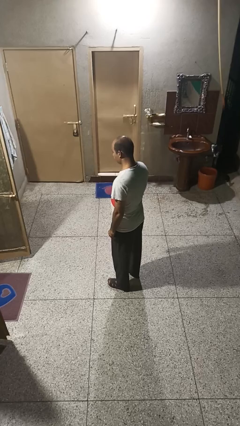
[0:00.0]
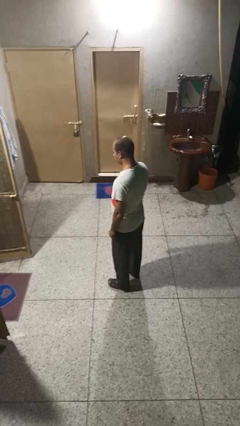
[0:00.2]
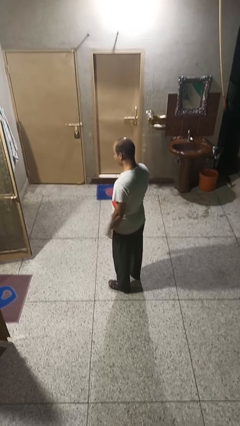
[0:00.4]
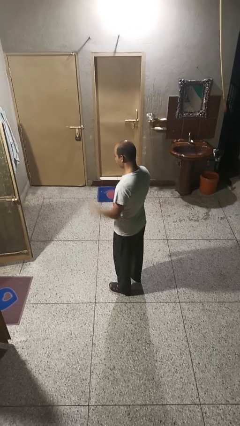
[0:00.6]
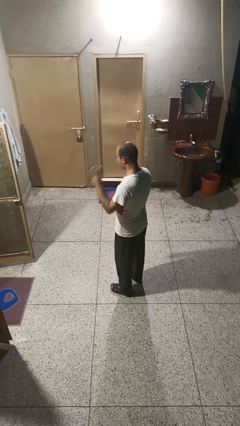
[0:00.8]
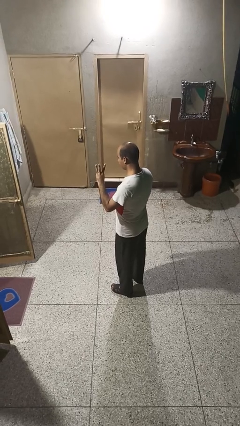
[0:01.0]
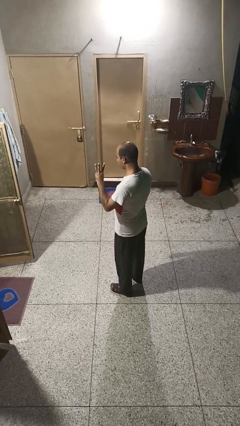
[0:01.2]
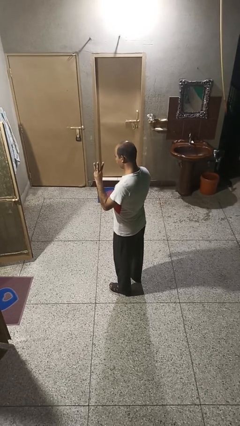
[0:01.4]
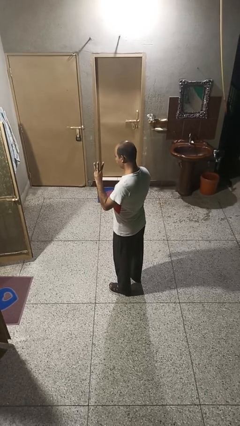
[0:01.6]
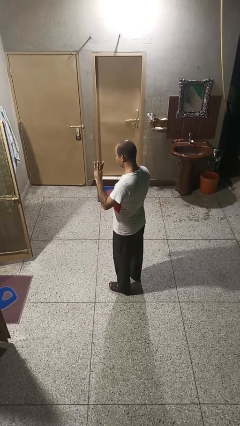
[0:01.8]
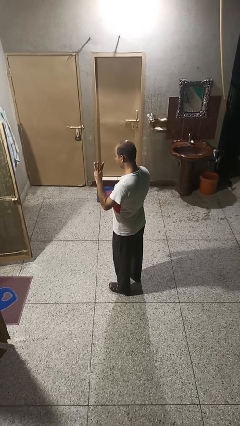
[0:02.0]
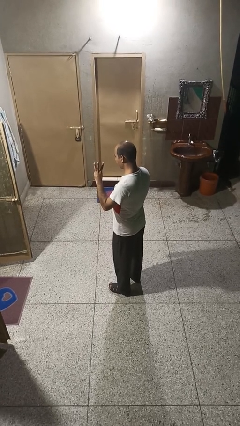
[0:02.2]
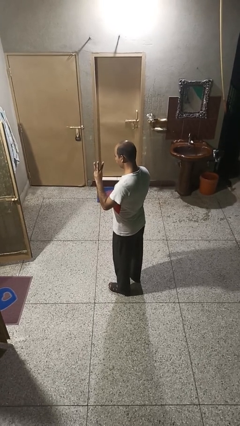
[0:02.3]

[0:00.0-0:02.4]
person gestures number three

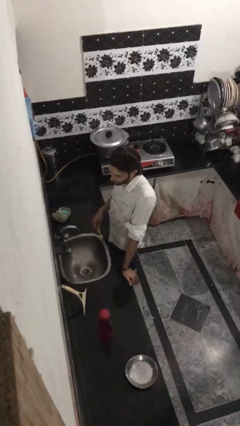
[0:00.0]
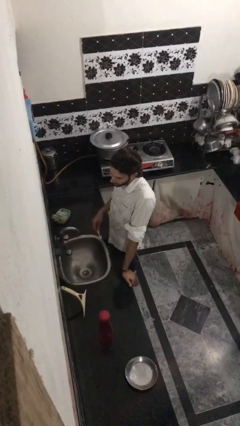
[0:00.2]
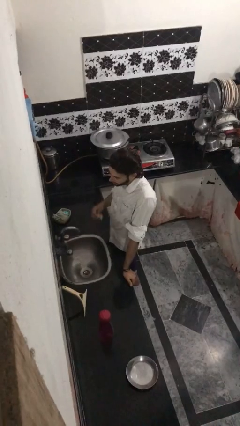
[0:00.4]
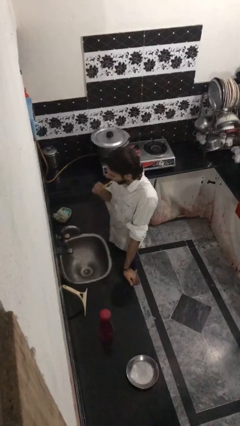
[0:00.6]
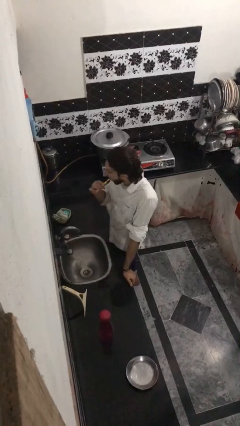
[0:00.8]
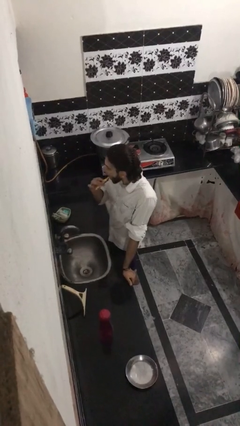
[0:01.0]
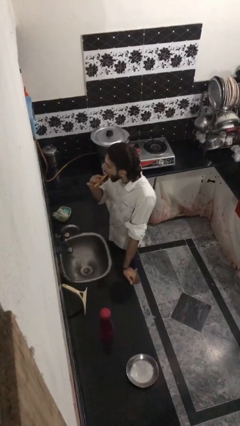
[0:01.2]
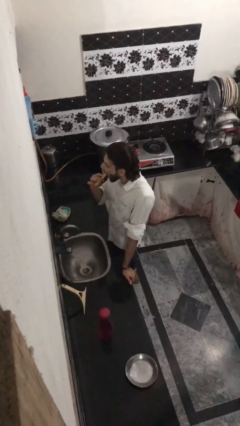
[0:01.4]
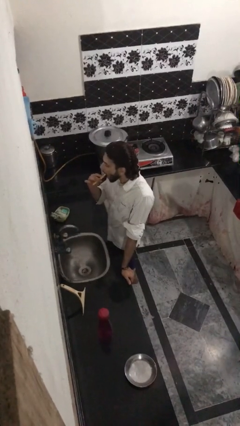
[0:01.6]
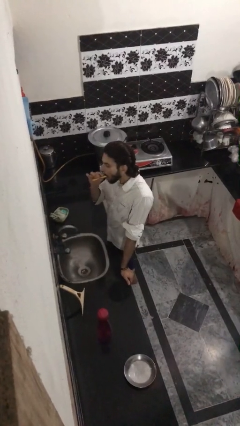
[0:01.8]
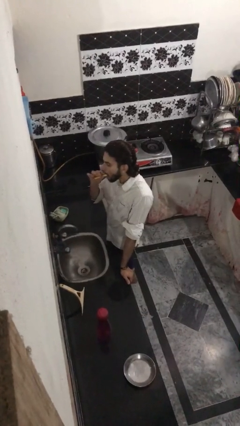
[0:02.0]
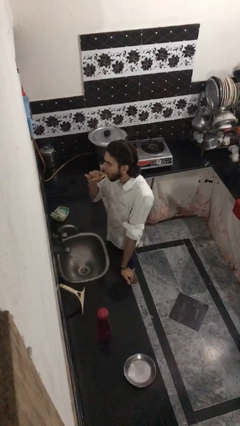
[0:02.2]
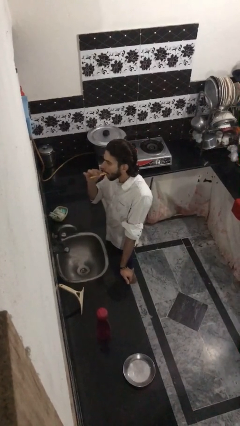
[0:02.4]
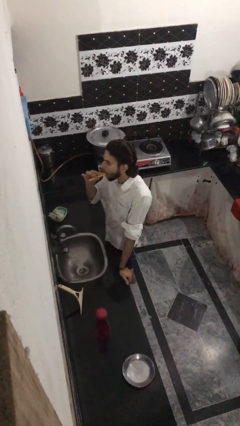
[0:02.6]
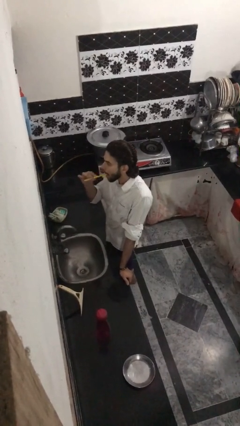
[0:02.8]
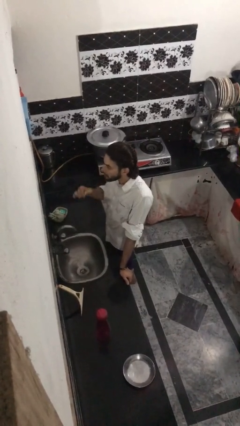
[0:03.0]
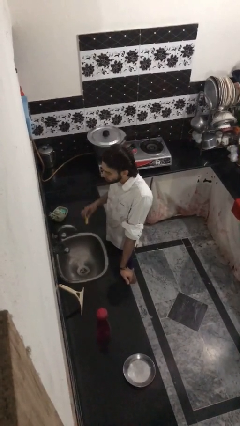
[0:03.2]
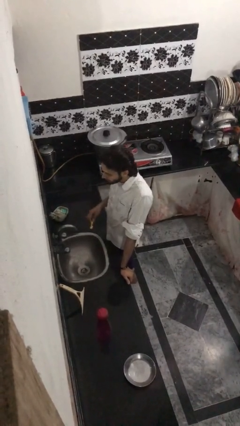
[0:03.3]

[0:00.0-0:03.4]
person brushes teeth

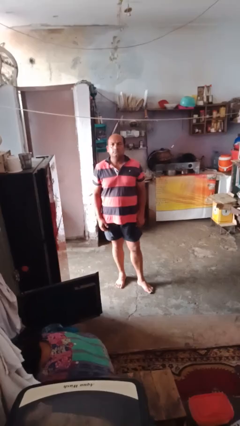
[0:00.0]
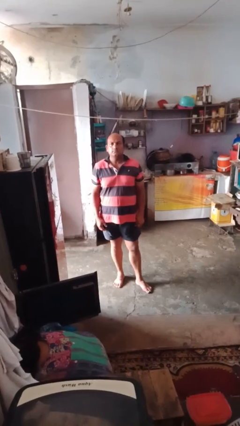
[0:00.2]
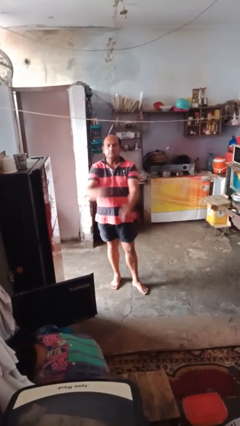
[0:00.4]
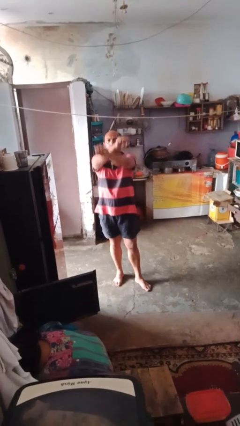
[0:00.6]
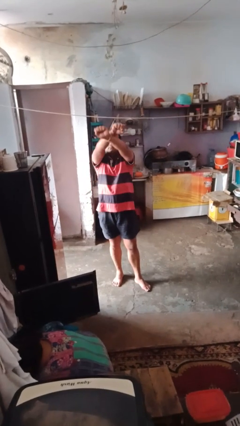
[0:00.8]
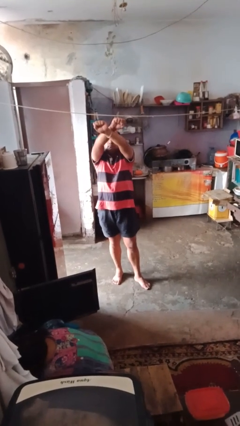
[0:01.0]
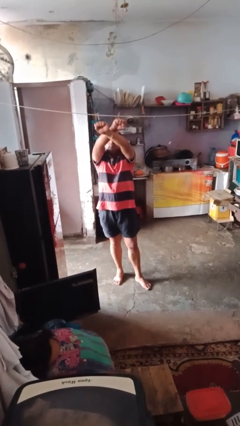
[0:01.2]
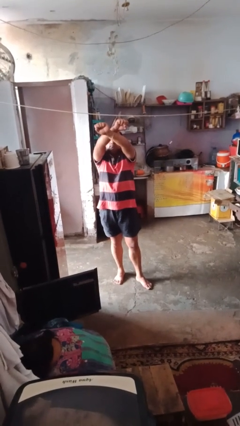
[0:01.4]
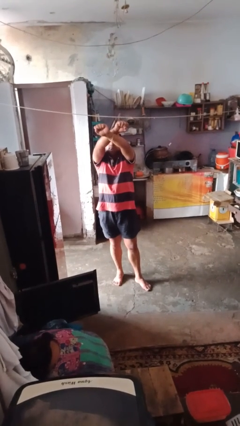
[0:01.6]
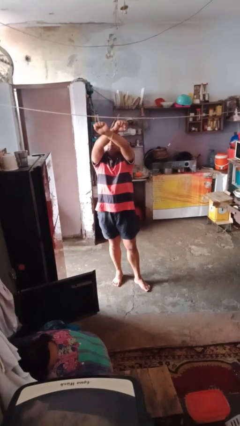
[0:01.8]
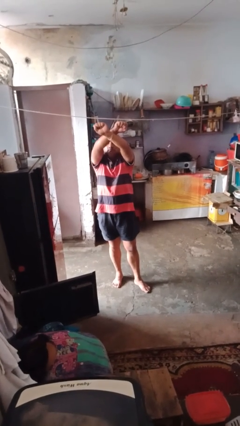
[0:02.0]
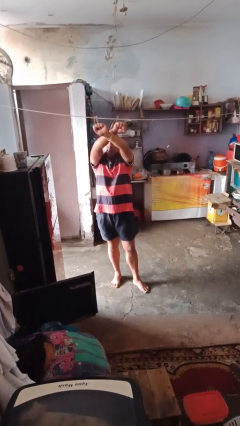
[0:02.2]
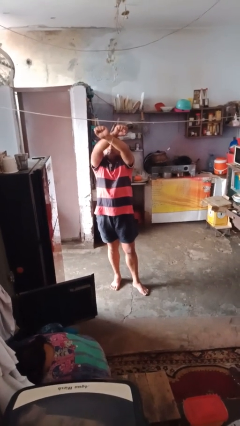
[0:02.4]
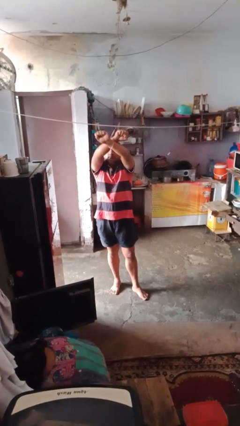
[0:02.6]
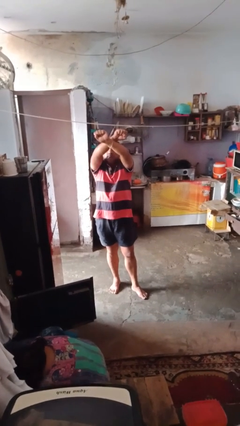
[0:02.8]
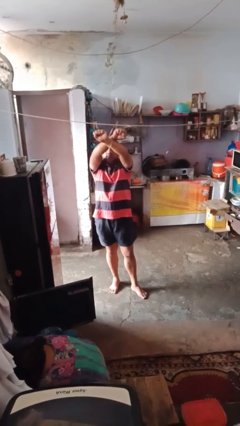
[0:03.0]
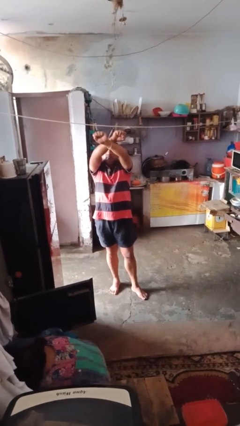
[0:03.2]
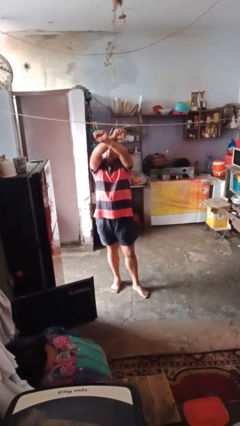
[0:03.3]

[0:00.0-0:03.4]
person gestures arms x

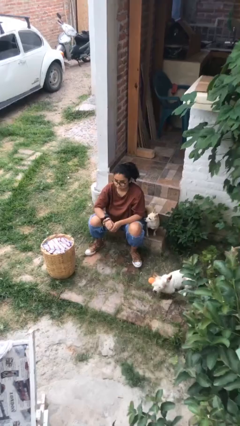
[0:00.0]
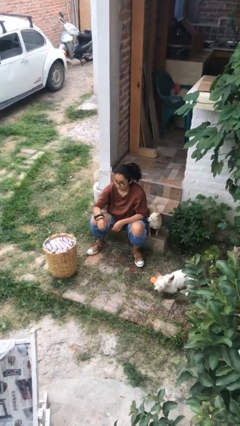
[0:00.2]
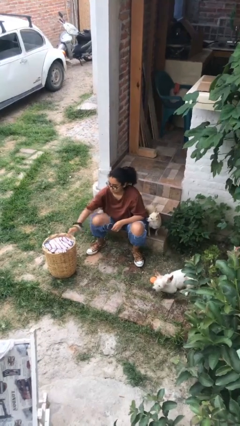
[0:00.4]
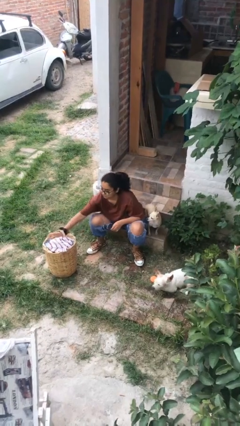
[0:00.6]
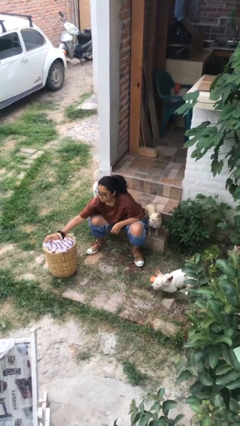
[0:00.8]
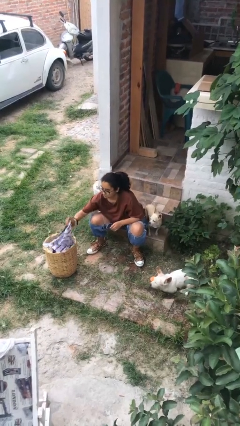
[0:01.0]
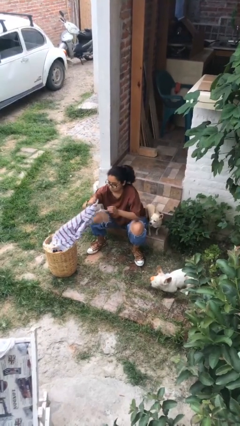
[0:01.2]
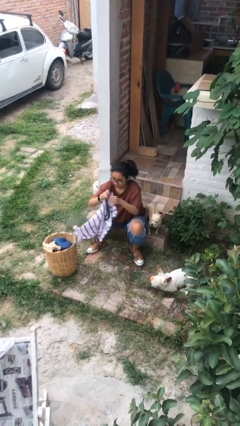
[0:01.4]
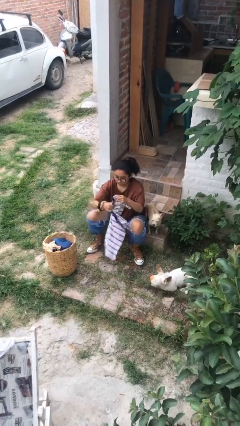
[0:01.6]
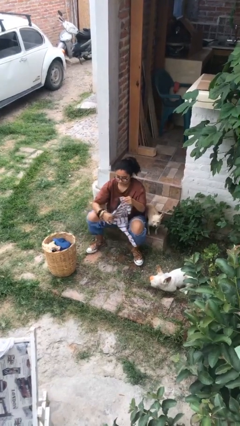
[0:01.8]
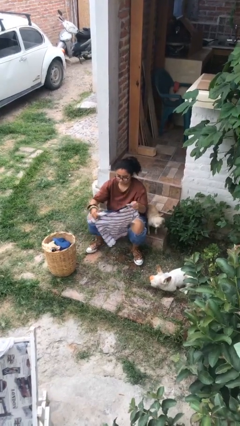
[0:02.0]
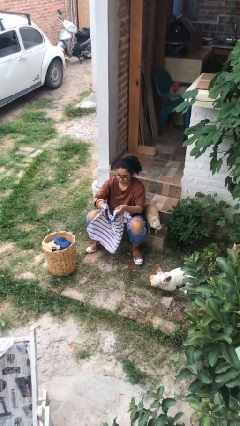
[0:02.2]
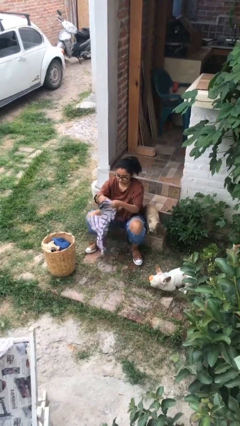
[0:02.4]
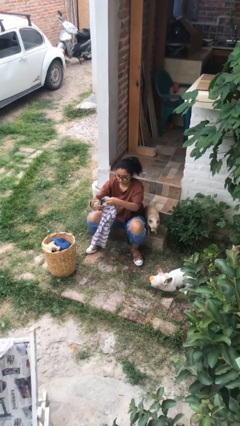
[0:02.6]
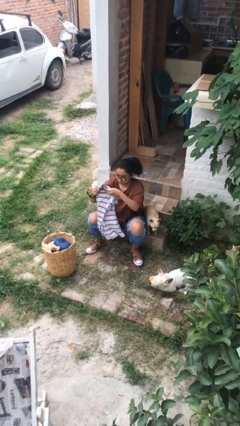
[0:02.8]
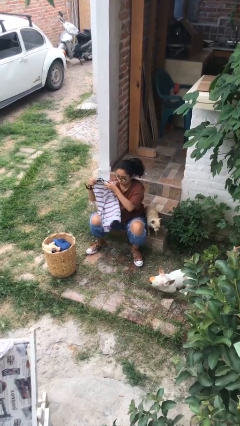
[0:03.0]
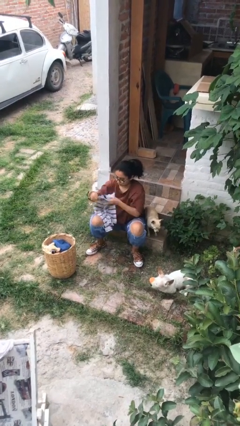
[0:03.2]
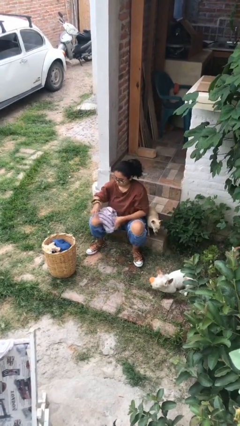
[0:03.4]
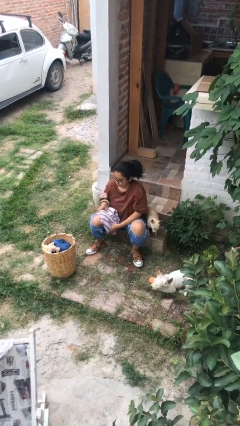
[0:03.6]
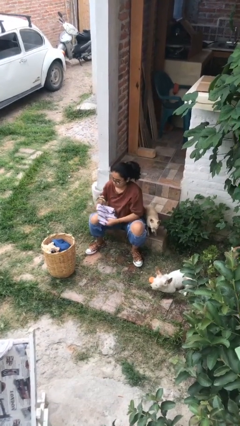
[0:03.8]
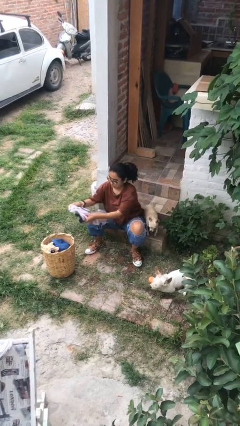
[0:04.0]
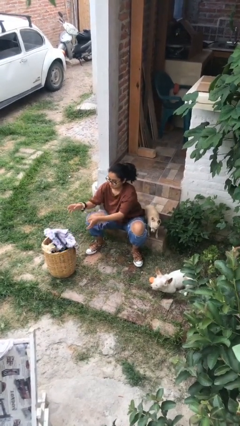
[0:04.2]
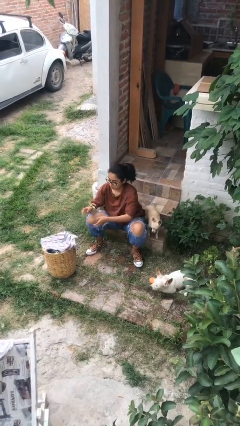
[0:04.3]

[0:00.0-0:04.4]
person folds shirt

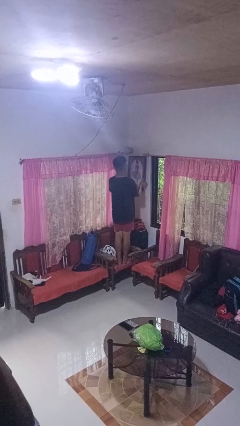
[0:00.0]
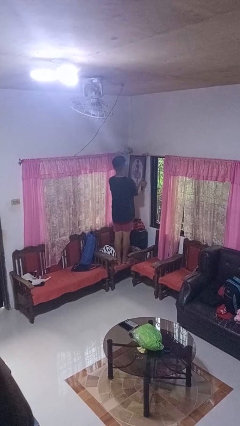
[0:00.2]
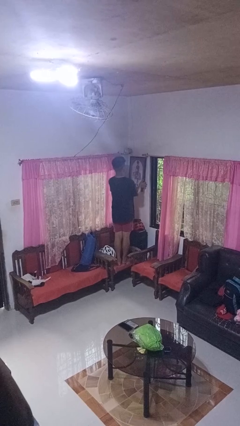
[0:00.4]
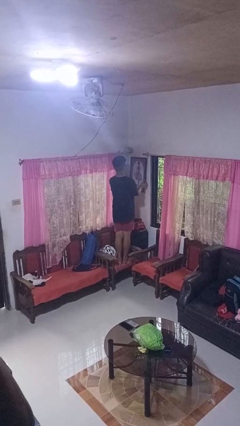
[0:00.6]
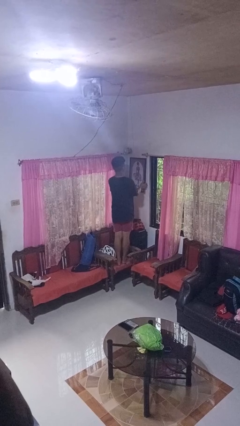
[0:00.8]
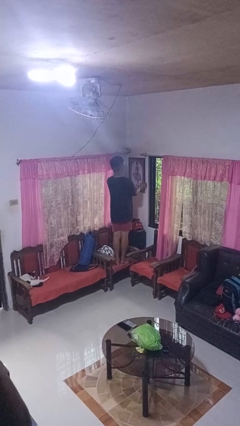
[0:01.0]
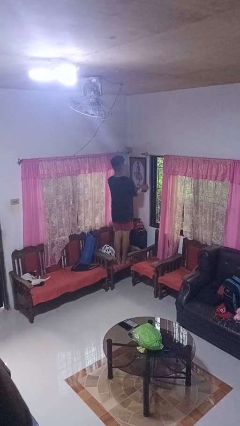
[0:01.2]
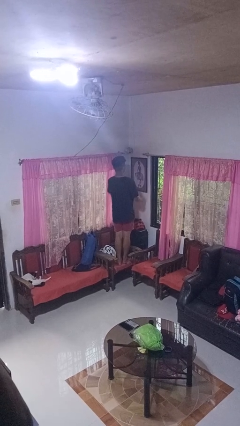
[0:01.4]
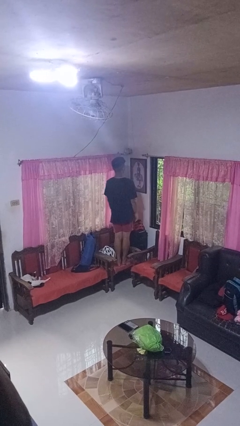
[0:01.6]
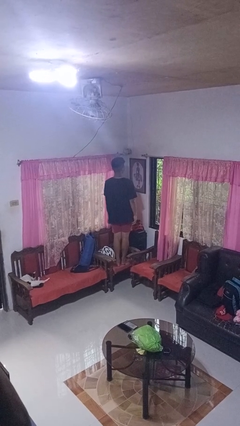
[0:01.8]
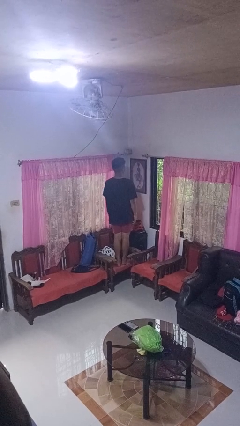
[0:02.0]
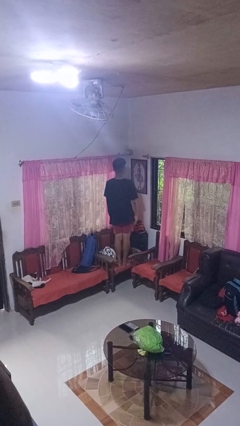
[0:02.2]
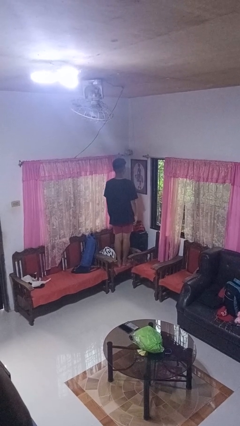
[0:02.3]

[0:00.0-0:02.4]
person puts up picture frame

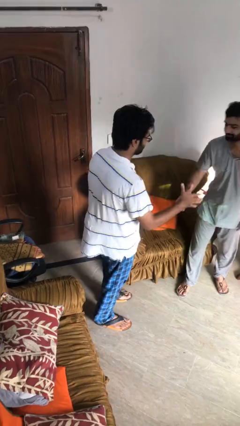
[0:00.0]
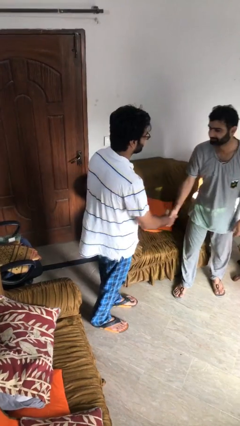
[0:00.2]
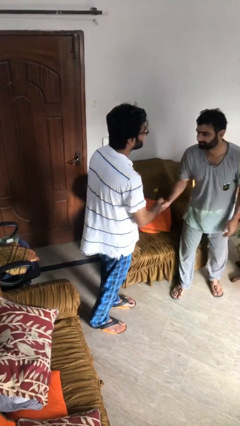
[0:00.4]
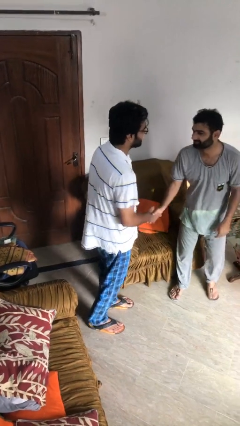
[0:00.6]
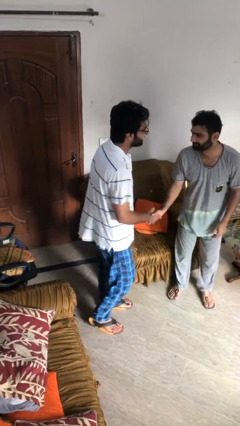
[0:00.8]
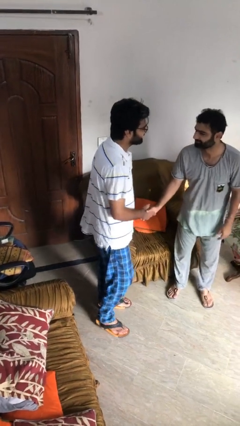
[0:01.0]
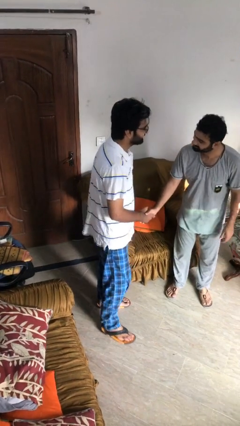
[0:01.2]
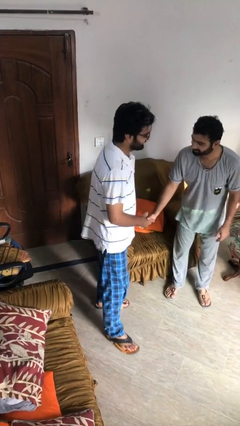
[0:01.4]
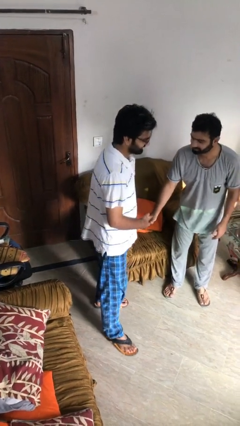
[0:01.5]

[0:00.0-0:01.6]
person shakes hand
